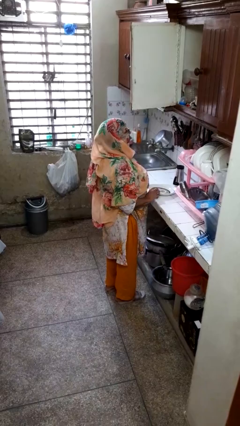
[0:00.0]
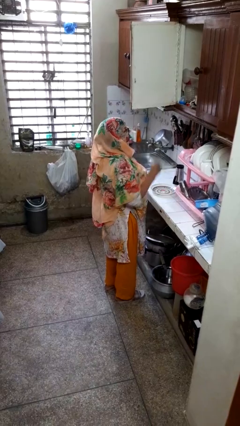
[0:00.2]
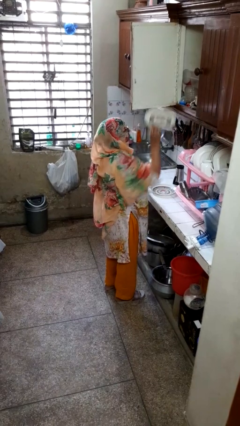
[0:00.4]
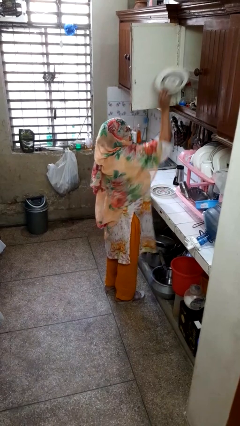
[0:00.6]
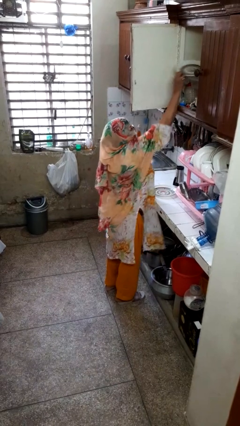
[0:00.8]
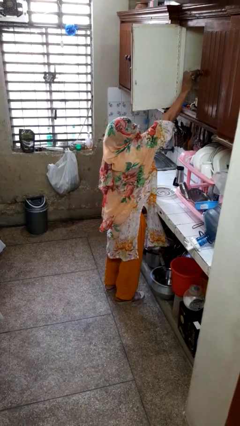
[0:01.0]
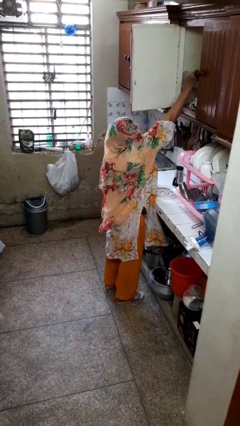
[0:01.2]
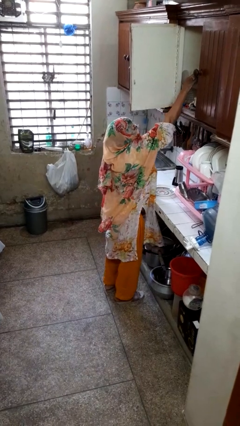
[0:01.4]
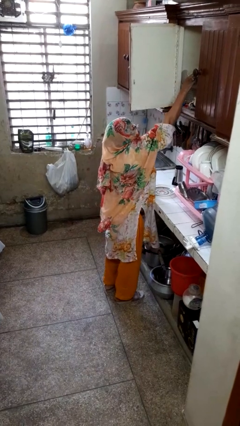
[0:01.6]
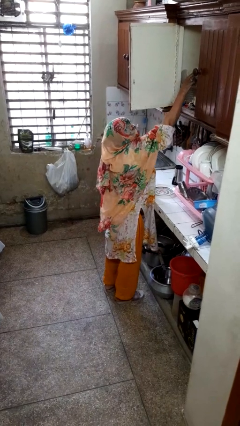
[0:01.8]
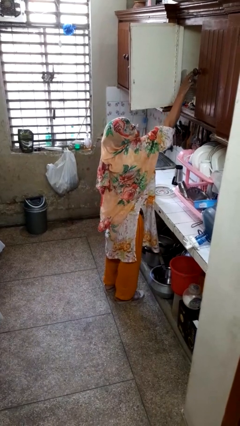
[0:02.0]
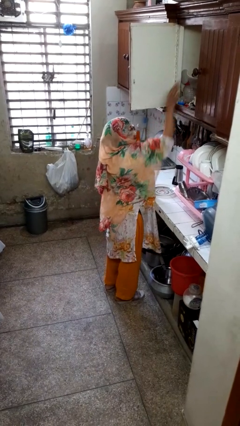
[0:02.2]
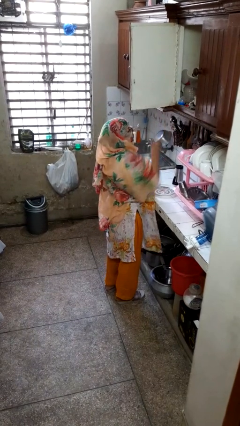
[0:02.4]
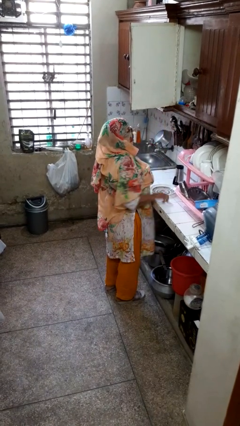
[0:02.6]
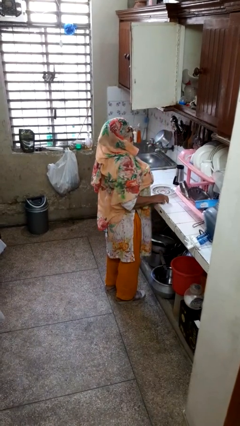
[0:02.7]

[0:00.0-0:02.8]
person puts object in cabinet

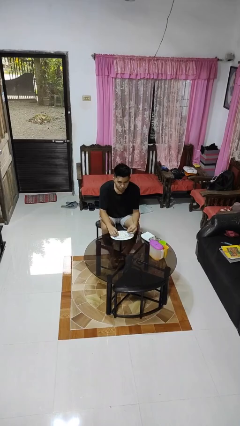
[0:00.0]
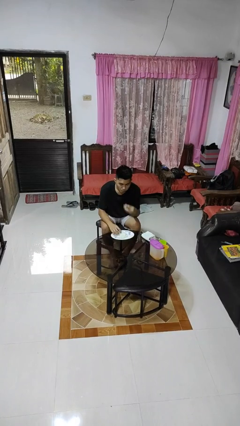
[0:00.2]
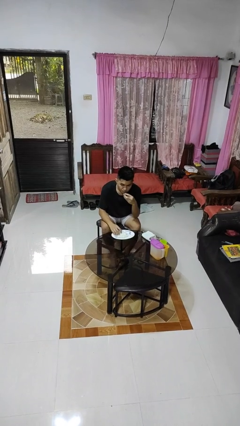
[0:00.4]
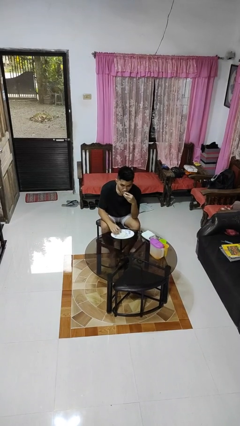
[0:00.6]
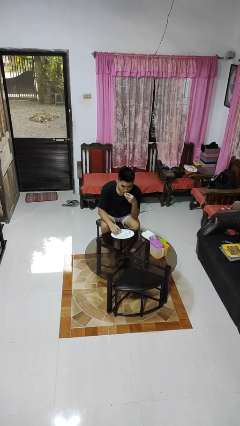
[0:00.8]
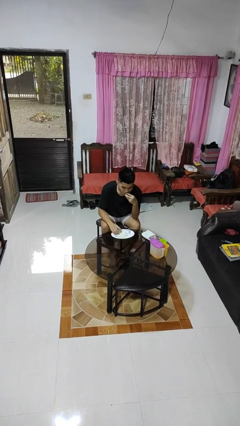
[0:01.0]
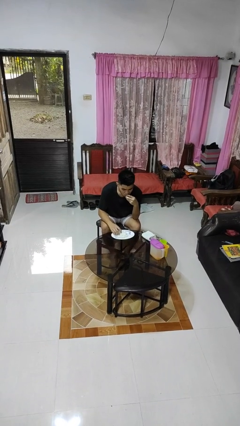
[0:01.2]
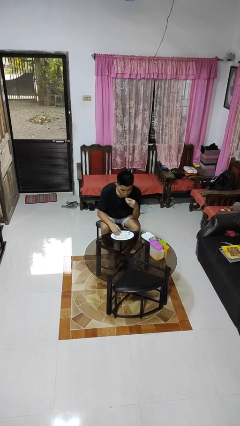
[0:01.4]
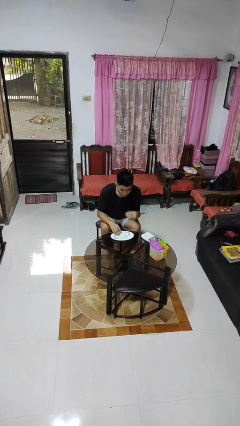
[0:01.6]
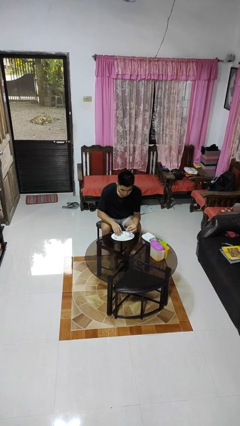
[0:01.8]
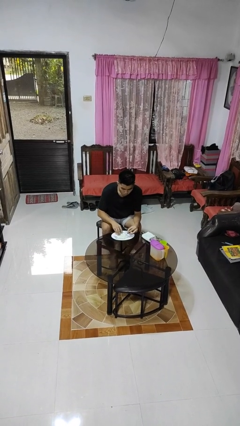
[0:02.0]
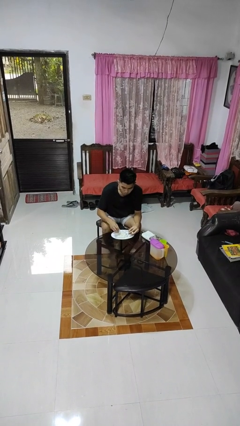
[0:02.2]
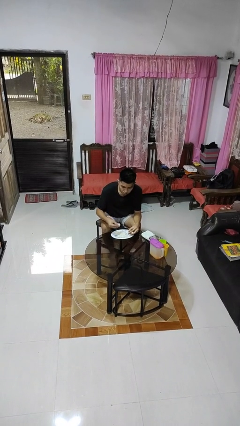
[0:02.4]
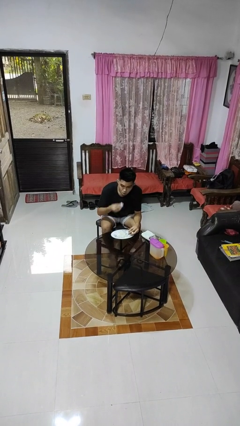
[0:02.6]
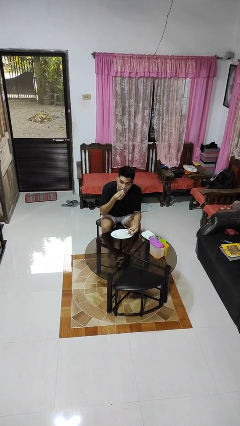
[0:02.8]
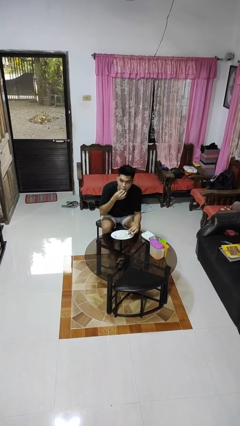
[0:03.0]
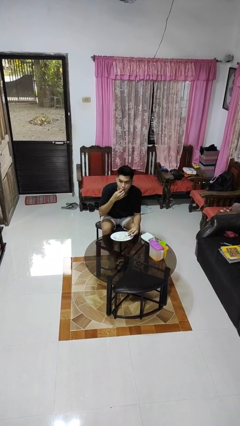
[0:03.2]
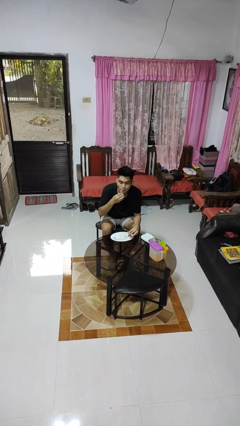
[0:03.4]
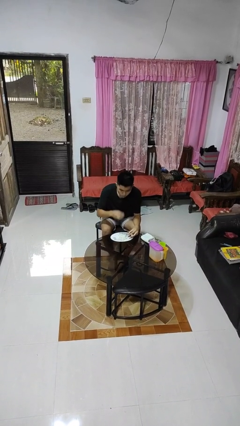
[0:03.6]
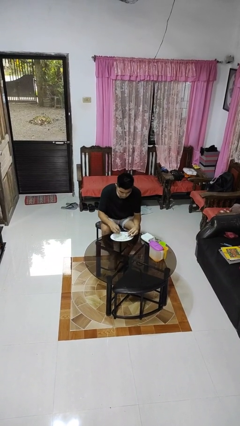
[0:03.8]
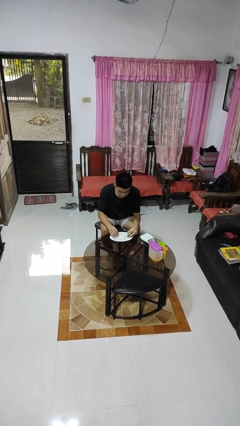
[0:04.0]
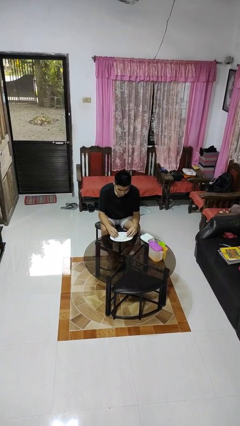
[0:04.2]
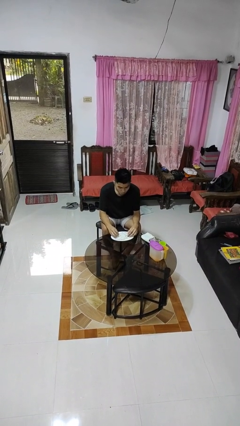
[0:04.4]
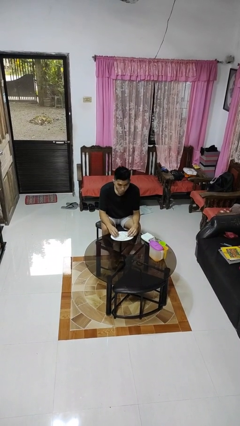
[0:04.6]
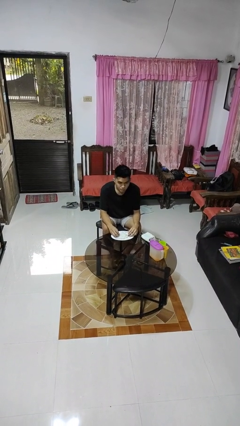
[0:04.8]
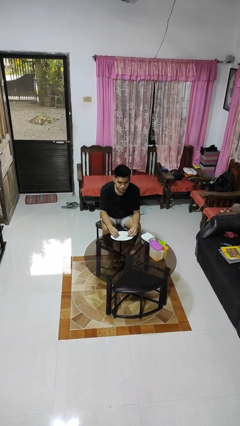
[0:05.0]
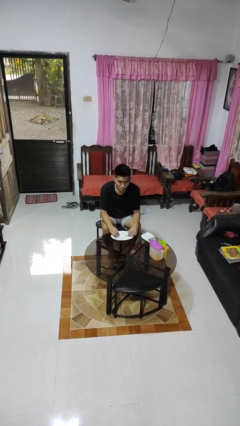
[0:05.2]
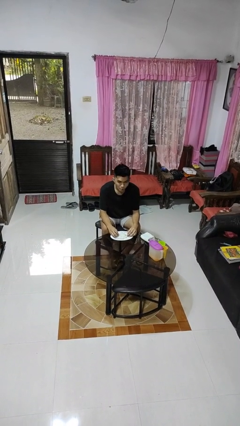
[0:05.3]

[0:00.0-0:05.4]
person eats with hands

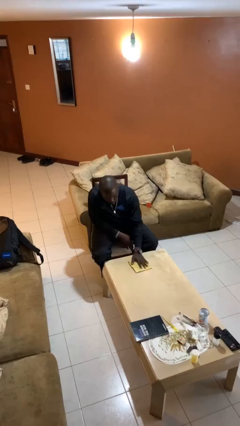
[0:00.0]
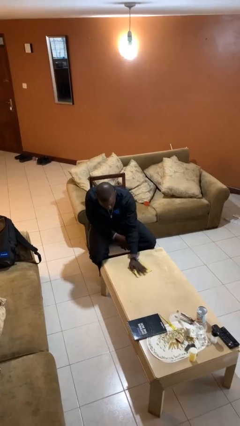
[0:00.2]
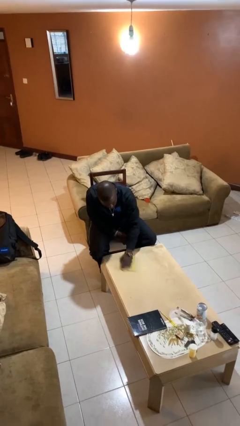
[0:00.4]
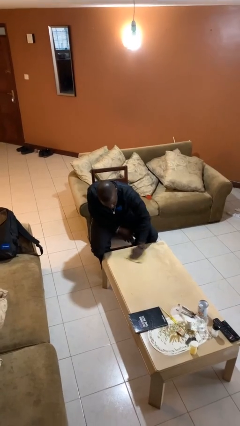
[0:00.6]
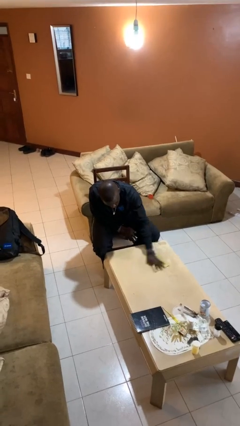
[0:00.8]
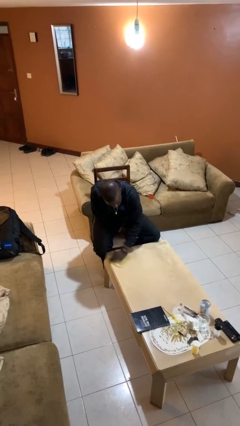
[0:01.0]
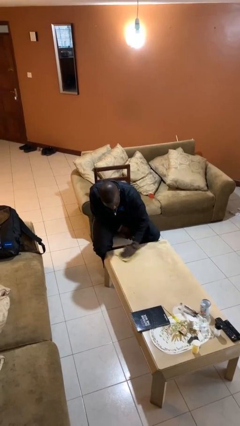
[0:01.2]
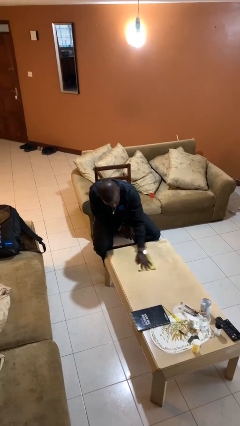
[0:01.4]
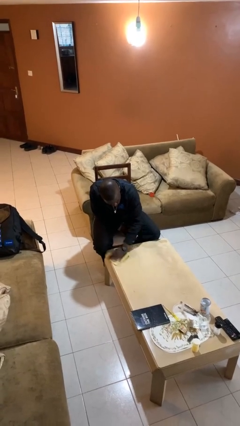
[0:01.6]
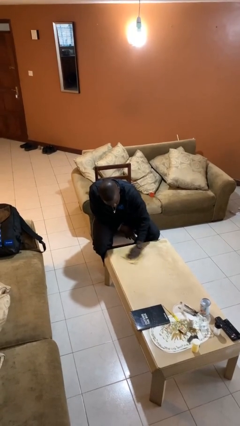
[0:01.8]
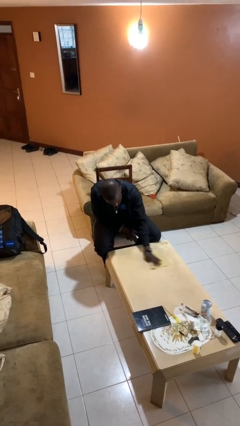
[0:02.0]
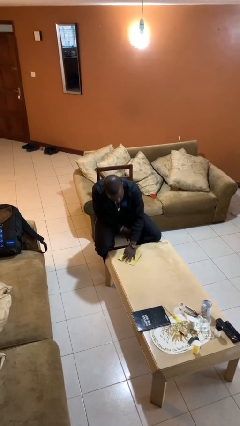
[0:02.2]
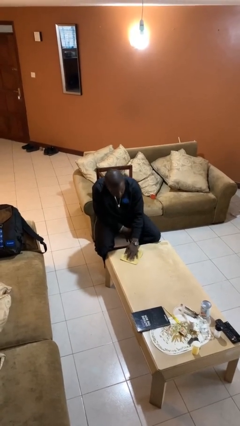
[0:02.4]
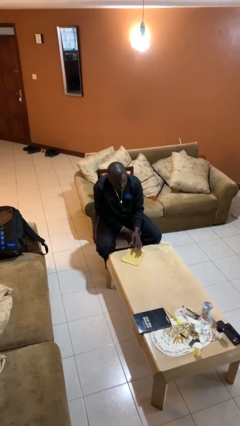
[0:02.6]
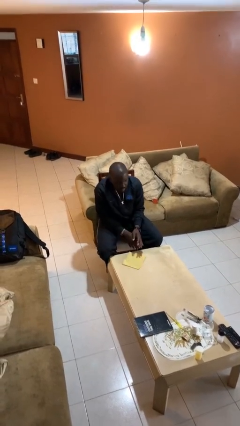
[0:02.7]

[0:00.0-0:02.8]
person cleans table with rag

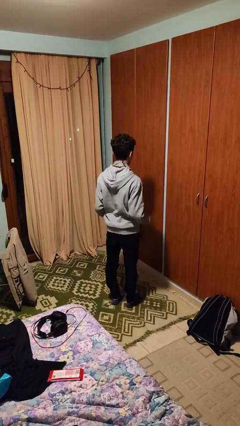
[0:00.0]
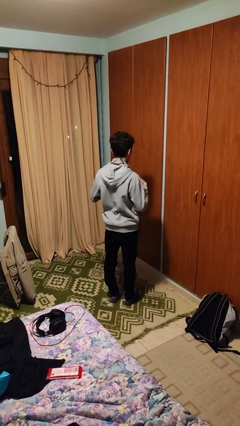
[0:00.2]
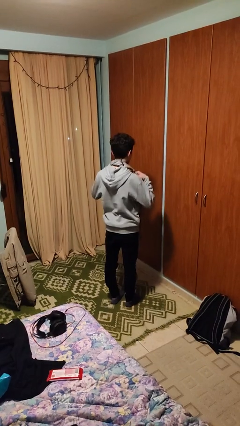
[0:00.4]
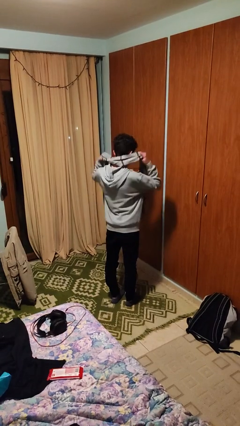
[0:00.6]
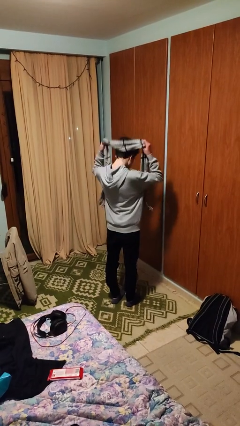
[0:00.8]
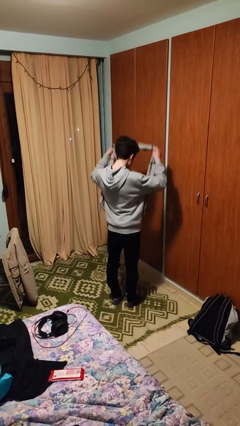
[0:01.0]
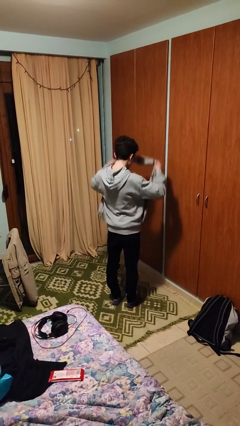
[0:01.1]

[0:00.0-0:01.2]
person takes off scarf

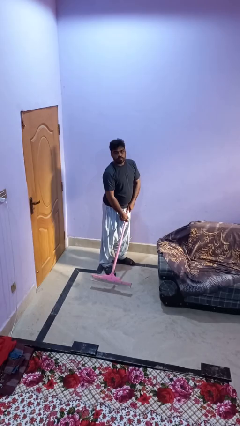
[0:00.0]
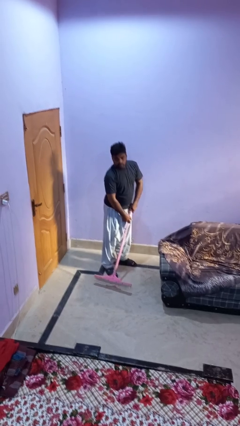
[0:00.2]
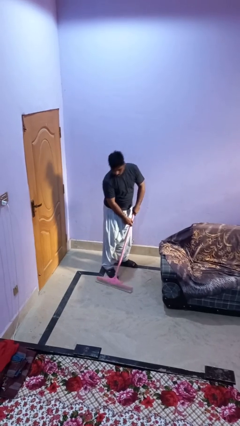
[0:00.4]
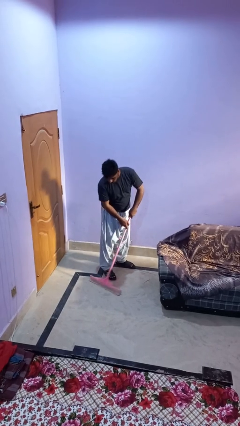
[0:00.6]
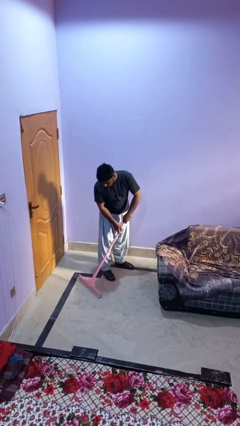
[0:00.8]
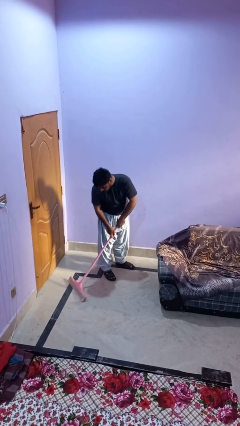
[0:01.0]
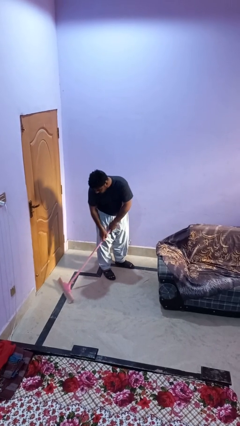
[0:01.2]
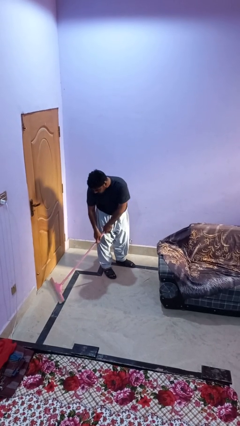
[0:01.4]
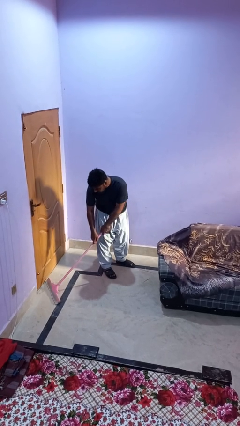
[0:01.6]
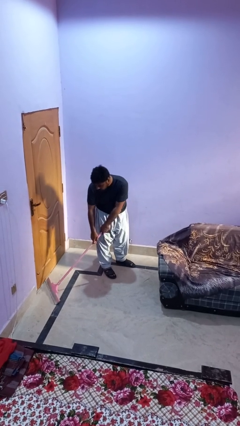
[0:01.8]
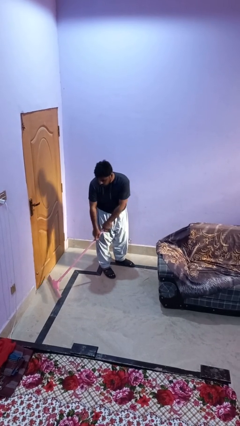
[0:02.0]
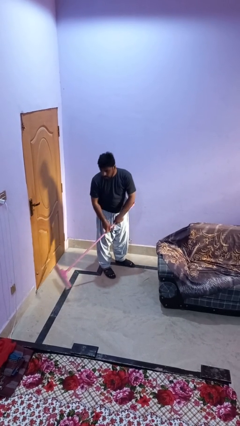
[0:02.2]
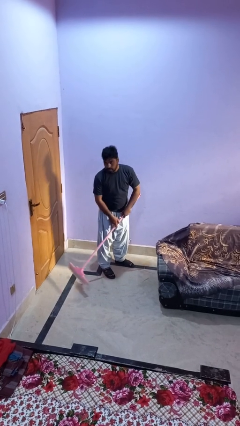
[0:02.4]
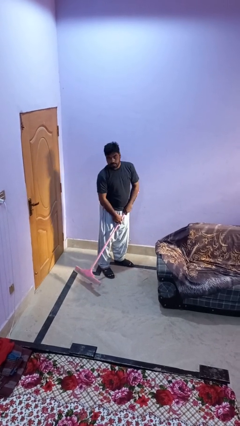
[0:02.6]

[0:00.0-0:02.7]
person vacuums carpet

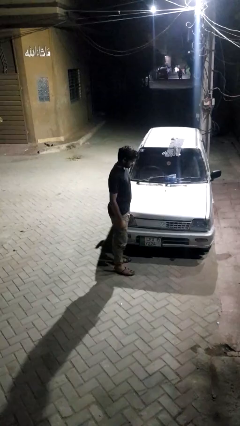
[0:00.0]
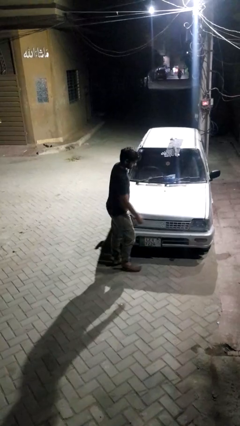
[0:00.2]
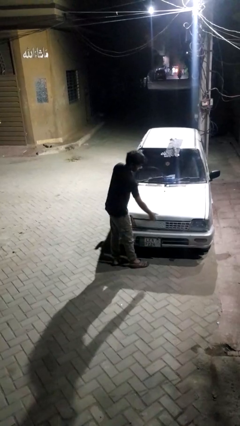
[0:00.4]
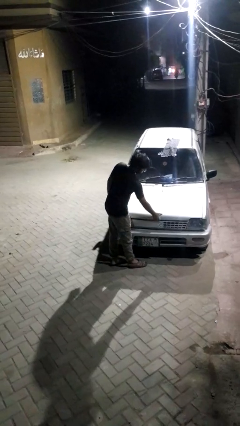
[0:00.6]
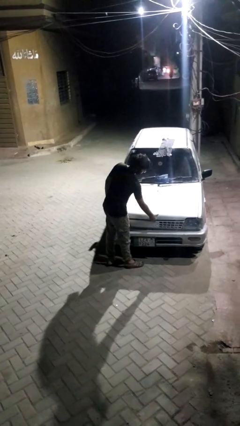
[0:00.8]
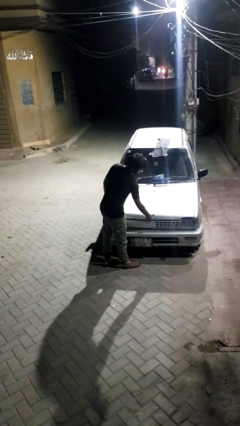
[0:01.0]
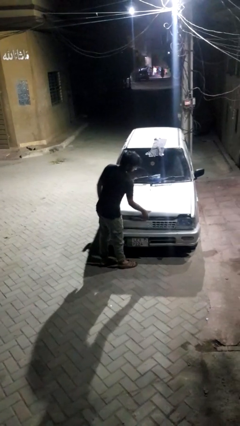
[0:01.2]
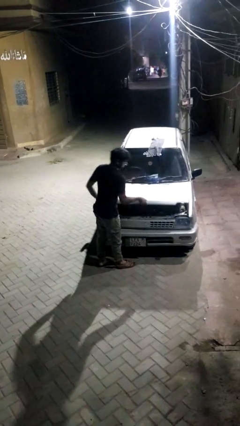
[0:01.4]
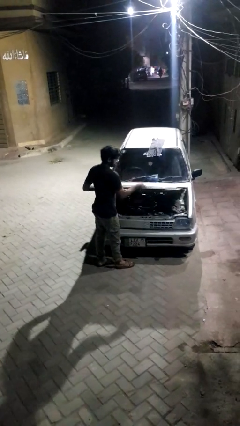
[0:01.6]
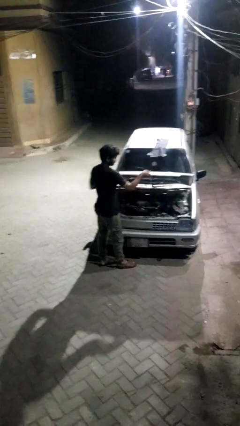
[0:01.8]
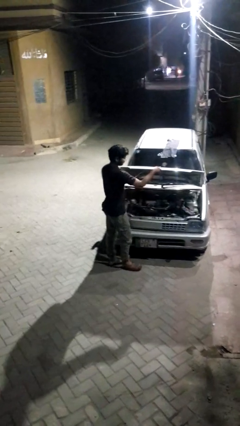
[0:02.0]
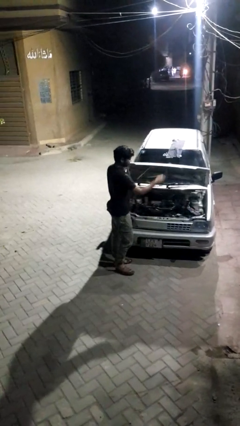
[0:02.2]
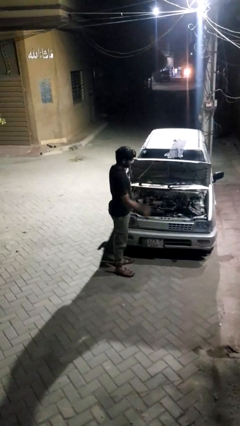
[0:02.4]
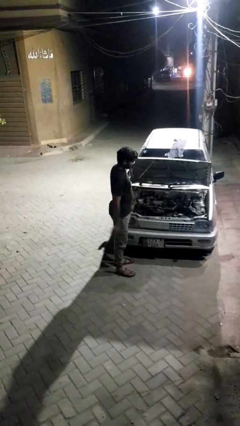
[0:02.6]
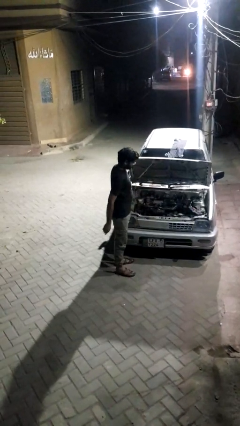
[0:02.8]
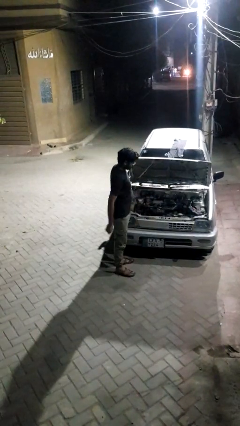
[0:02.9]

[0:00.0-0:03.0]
person opens car hood
